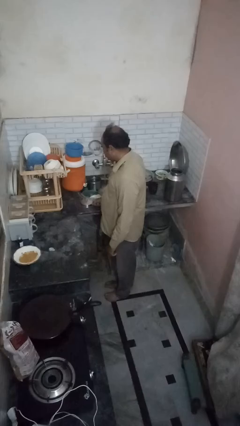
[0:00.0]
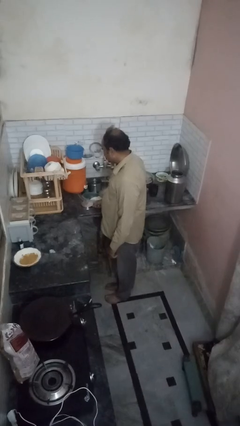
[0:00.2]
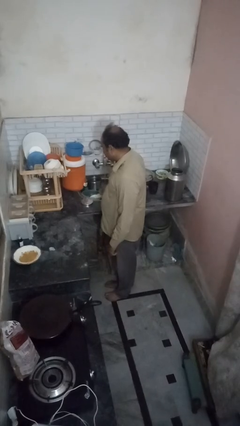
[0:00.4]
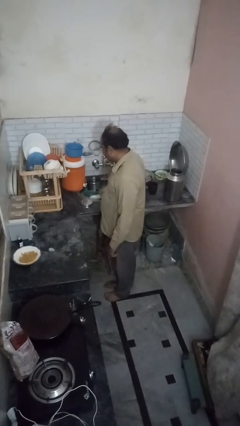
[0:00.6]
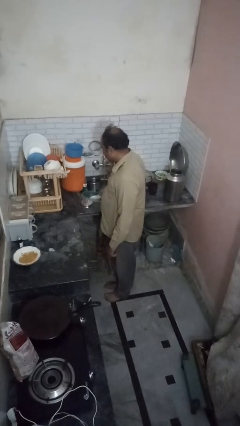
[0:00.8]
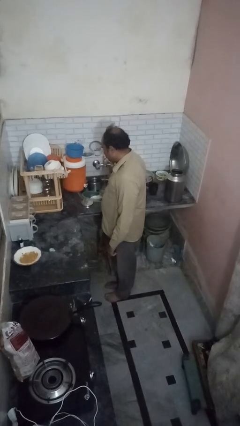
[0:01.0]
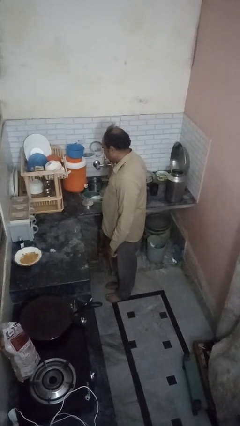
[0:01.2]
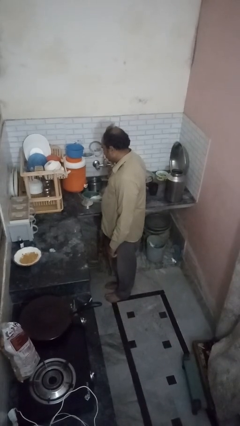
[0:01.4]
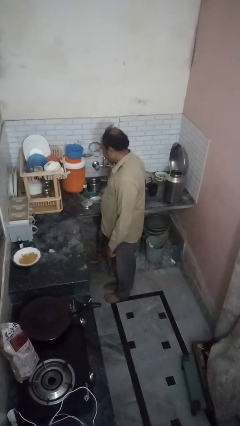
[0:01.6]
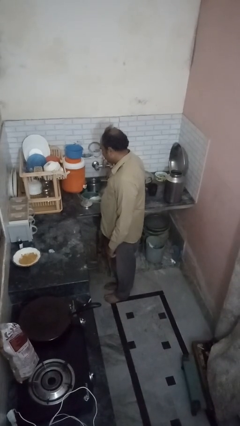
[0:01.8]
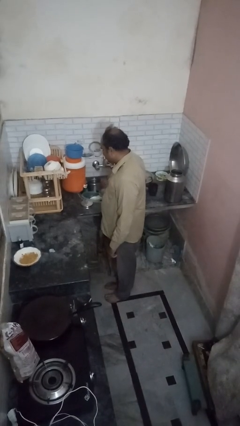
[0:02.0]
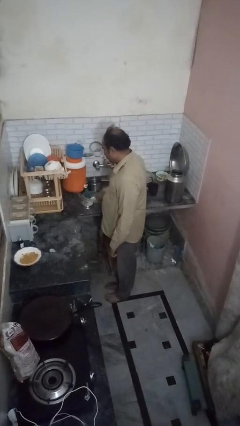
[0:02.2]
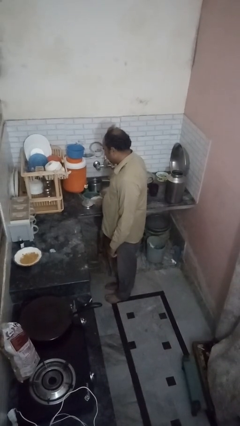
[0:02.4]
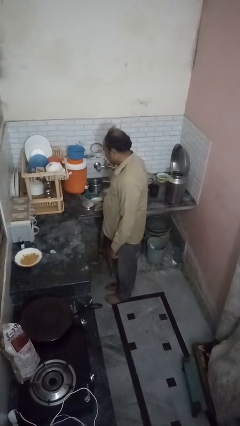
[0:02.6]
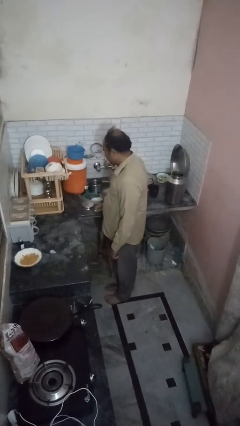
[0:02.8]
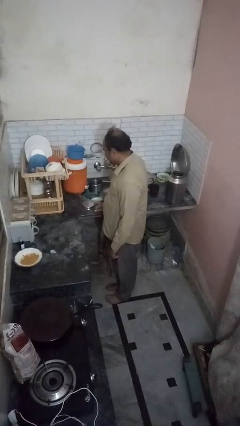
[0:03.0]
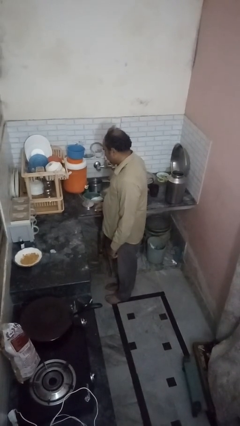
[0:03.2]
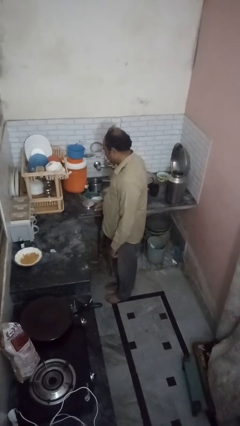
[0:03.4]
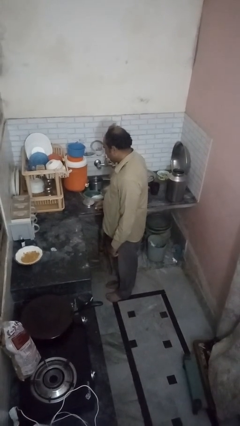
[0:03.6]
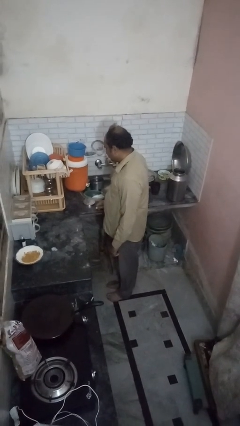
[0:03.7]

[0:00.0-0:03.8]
person closes dishwasher

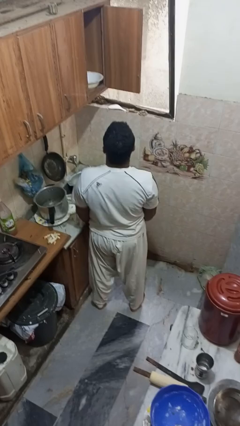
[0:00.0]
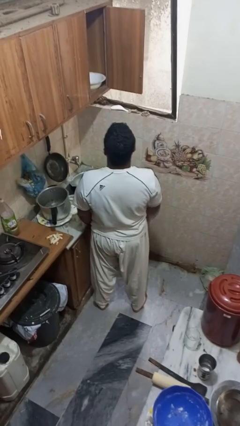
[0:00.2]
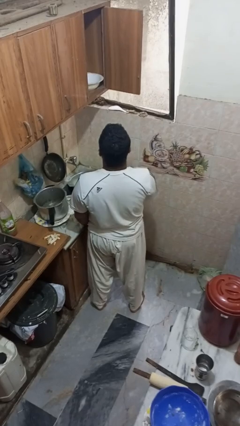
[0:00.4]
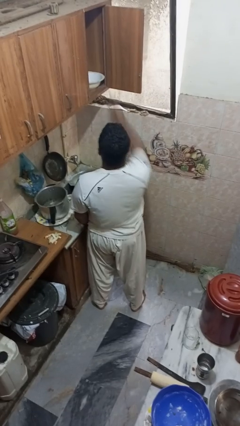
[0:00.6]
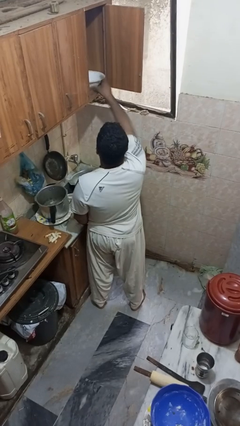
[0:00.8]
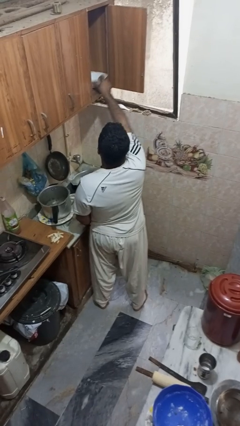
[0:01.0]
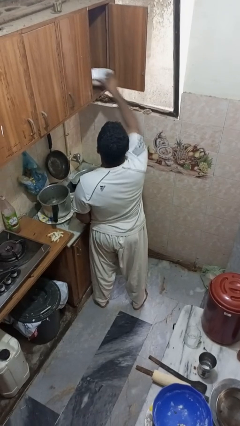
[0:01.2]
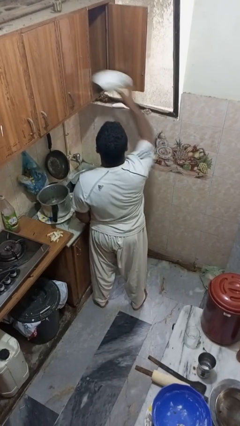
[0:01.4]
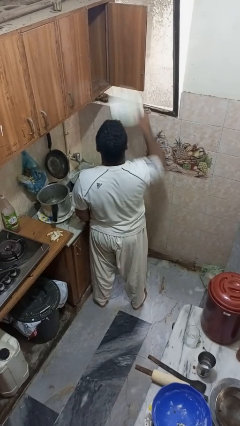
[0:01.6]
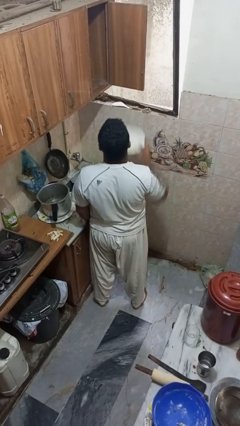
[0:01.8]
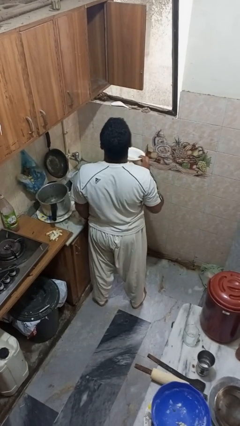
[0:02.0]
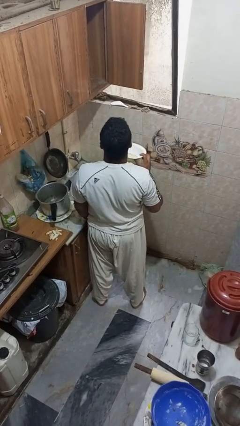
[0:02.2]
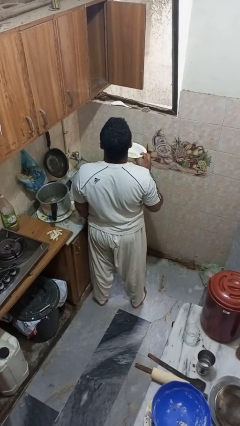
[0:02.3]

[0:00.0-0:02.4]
person takes object from cabinet

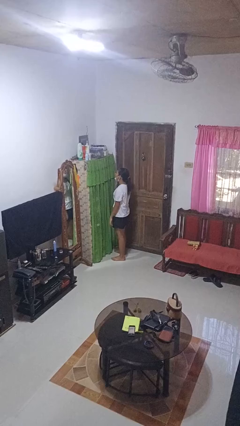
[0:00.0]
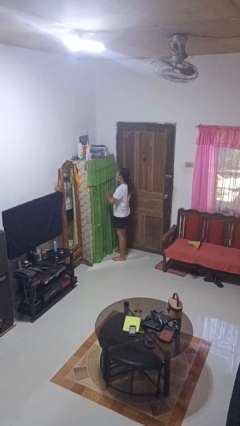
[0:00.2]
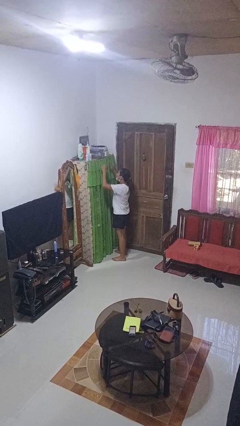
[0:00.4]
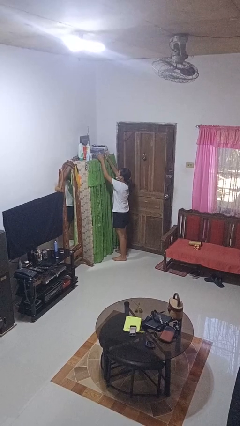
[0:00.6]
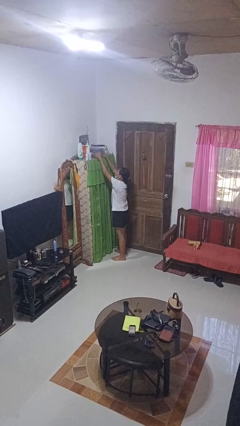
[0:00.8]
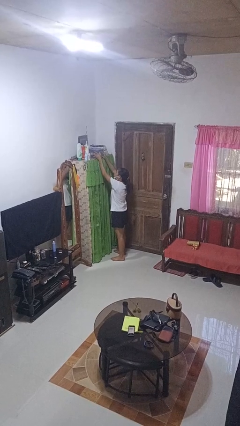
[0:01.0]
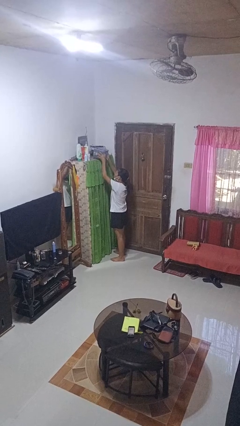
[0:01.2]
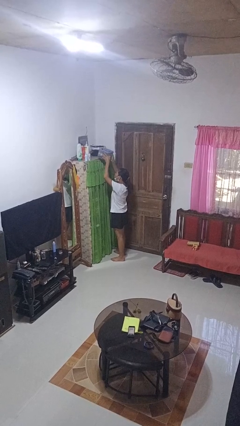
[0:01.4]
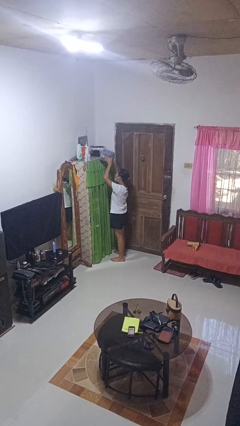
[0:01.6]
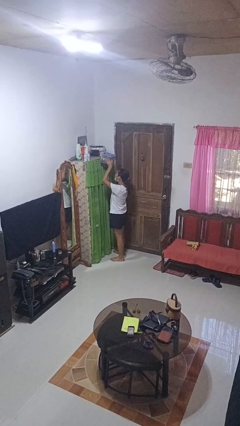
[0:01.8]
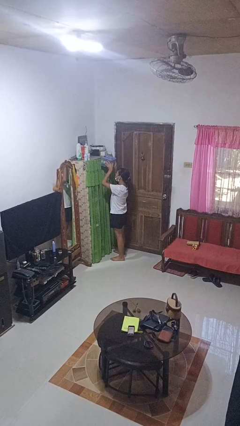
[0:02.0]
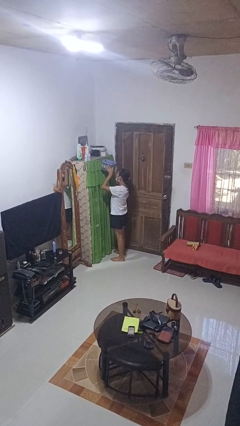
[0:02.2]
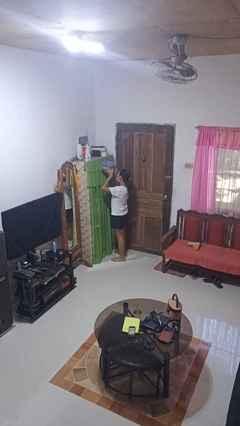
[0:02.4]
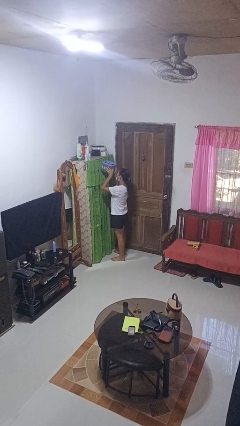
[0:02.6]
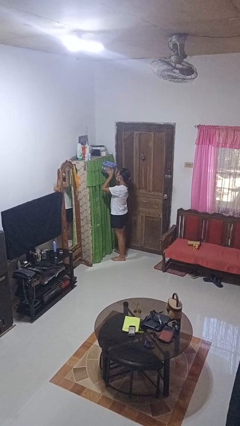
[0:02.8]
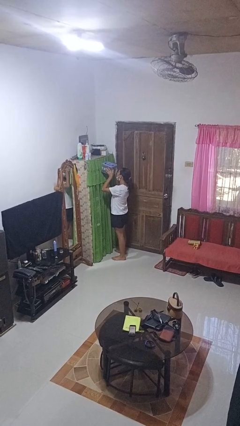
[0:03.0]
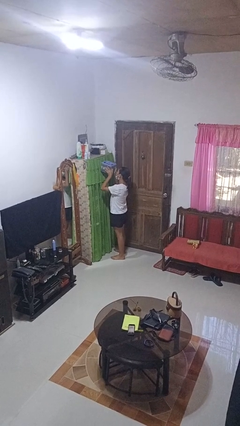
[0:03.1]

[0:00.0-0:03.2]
person picks up object from shelf

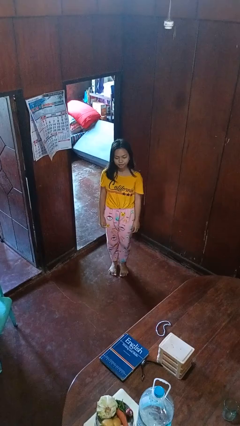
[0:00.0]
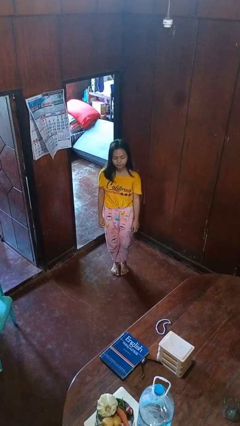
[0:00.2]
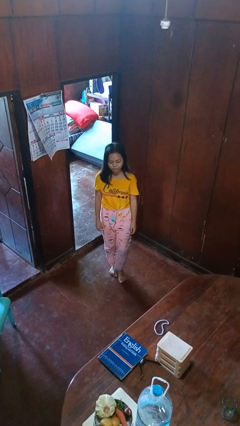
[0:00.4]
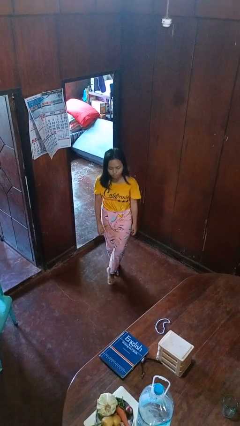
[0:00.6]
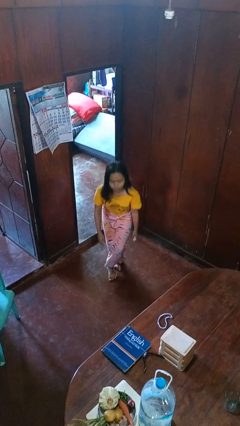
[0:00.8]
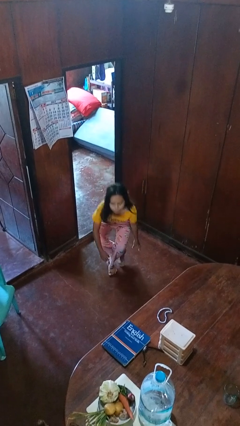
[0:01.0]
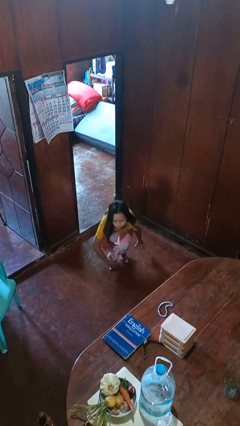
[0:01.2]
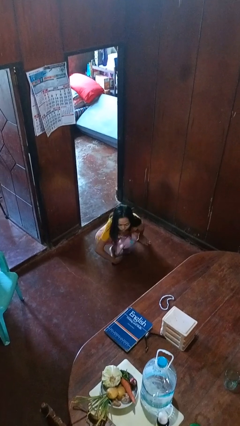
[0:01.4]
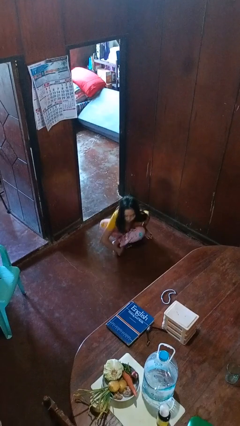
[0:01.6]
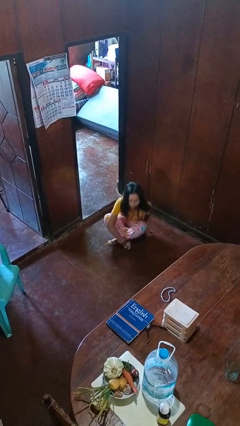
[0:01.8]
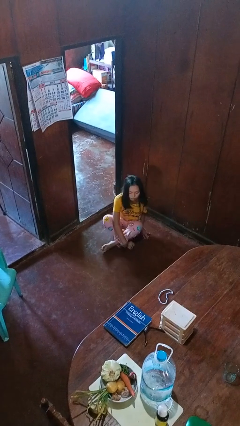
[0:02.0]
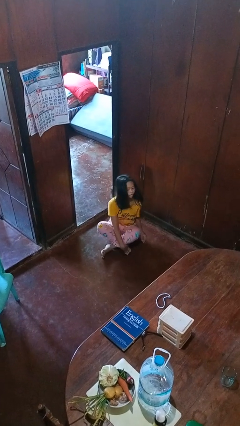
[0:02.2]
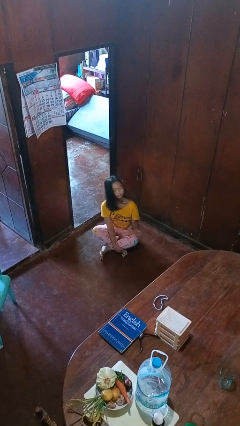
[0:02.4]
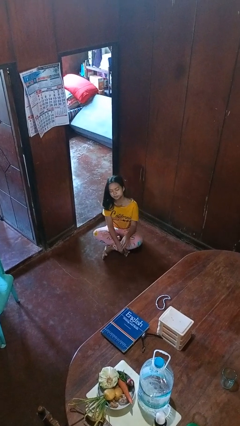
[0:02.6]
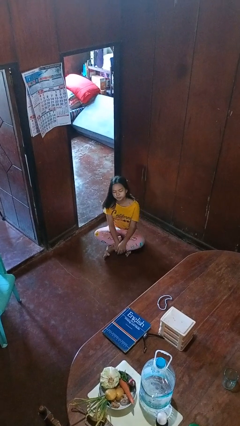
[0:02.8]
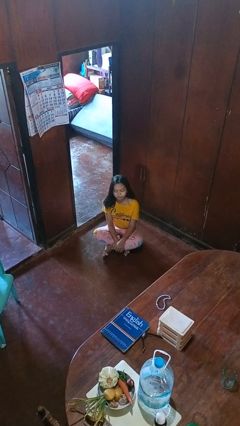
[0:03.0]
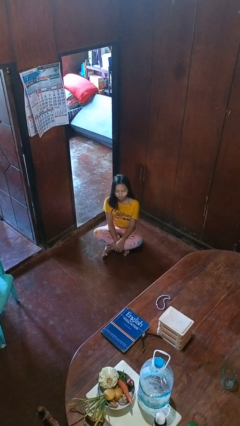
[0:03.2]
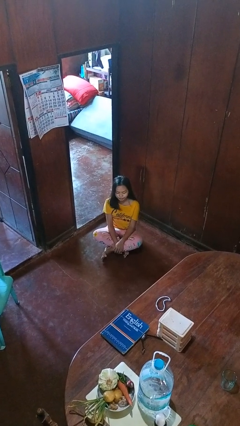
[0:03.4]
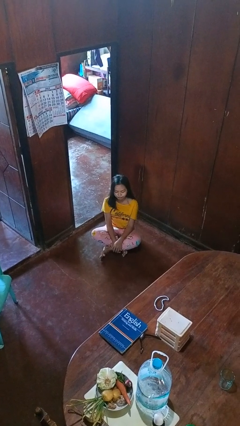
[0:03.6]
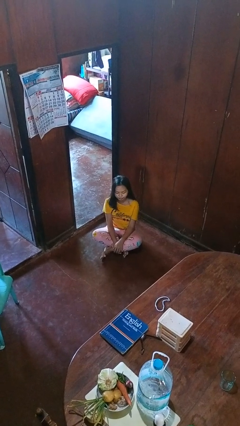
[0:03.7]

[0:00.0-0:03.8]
person sits crisscross

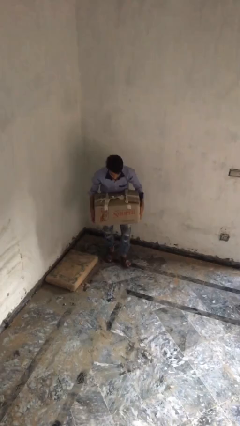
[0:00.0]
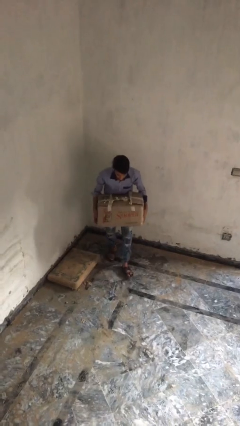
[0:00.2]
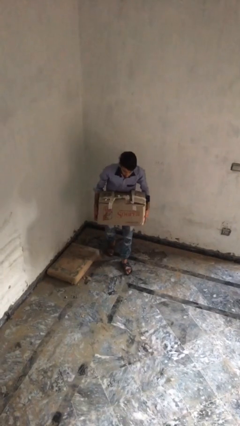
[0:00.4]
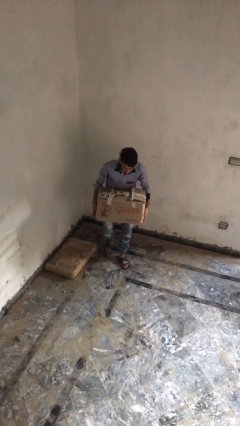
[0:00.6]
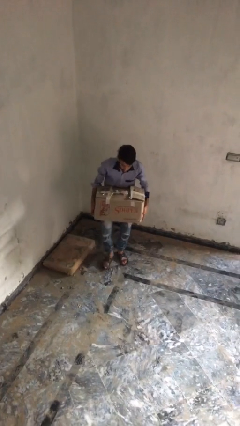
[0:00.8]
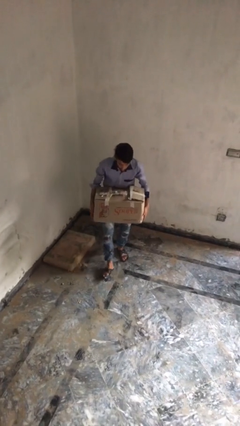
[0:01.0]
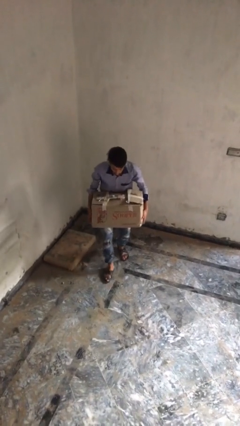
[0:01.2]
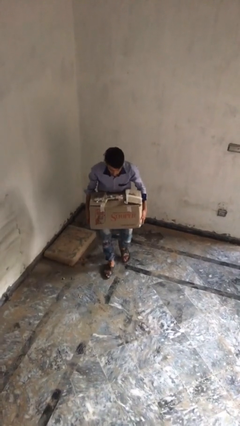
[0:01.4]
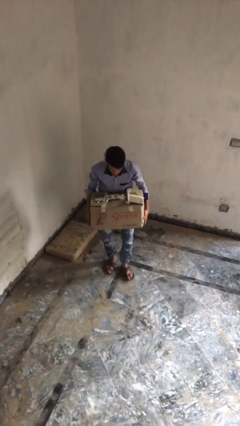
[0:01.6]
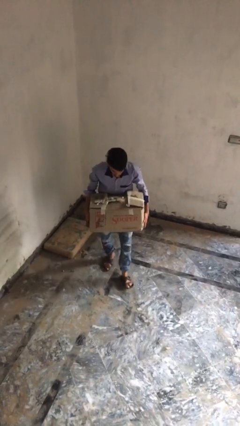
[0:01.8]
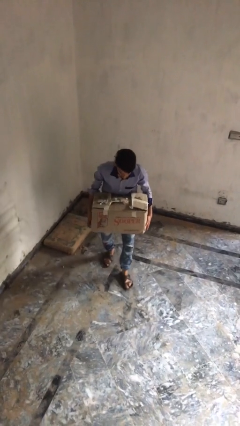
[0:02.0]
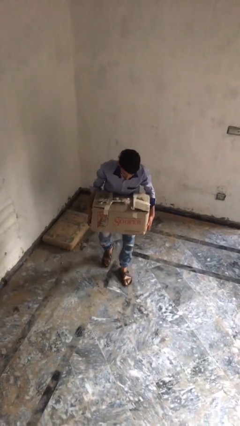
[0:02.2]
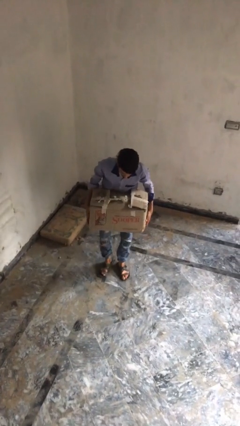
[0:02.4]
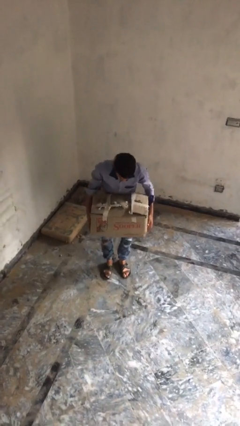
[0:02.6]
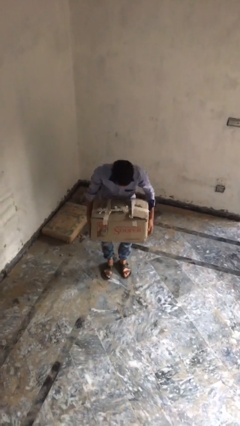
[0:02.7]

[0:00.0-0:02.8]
person carries heavy object

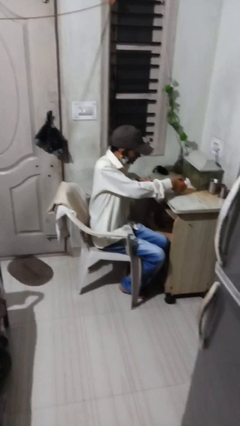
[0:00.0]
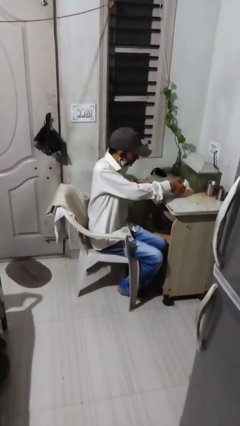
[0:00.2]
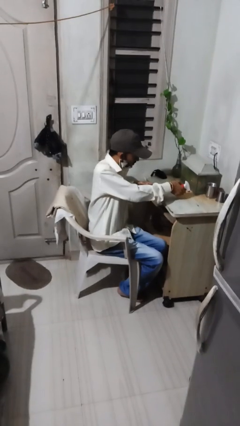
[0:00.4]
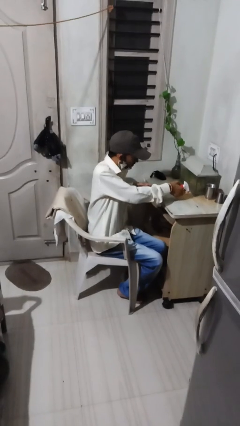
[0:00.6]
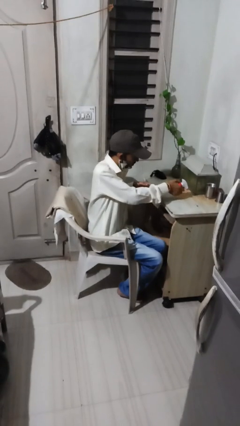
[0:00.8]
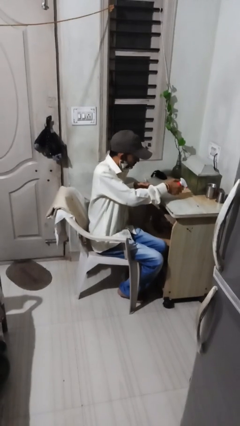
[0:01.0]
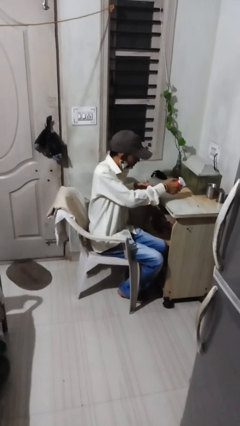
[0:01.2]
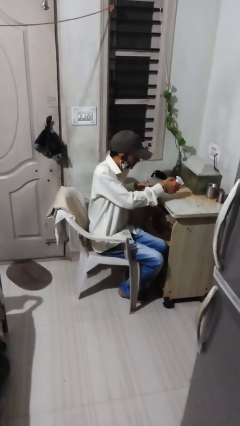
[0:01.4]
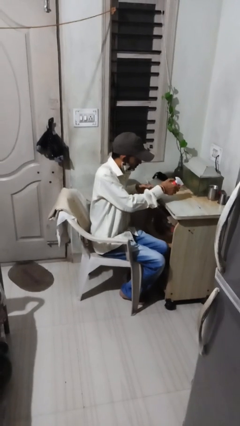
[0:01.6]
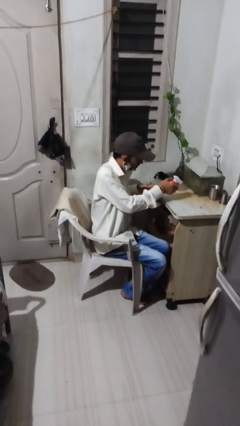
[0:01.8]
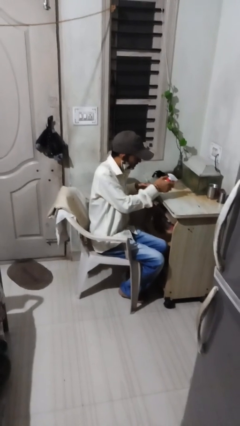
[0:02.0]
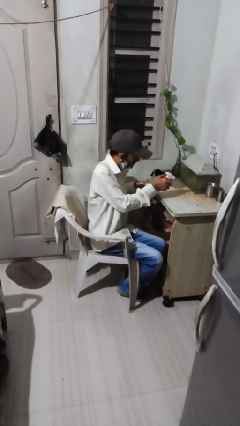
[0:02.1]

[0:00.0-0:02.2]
person sprays from bottle
